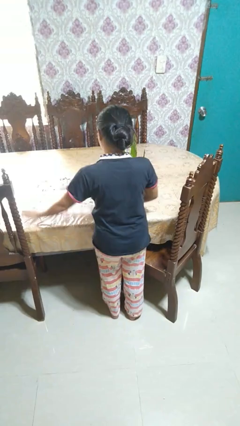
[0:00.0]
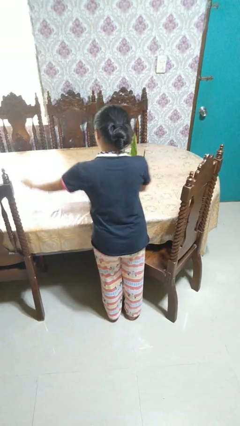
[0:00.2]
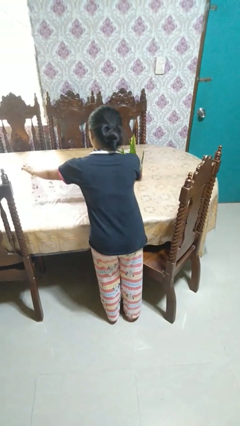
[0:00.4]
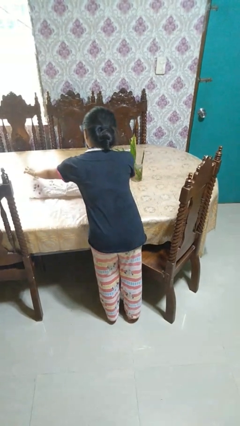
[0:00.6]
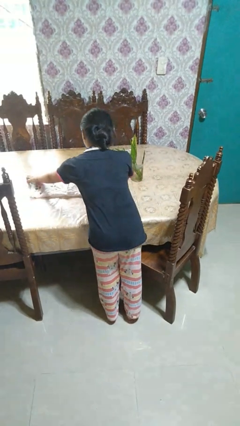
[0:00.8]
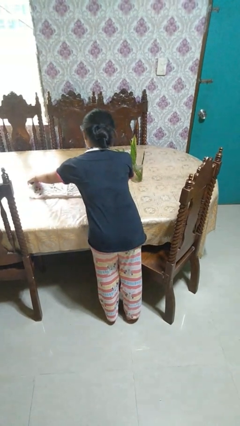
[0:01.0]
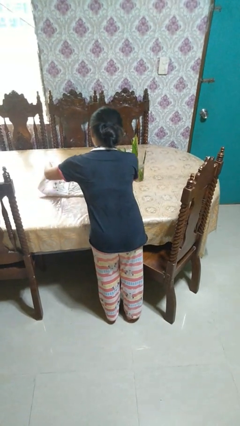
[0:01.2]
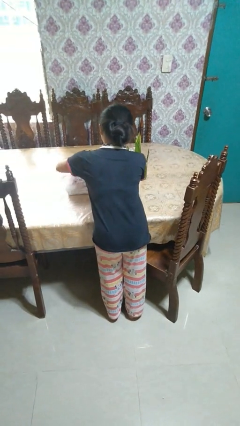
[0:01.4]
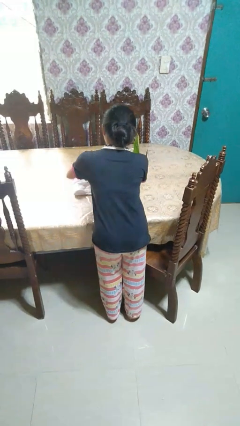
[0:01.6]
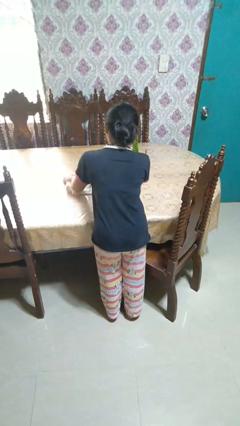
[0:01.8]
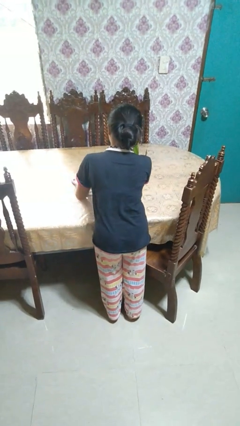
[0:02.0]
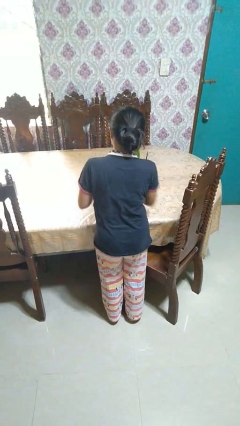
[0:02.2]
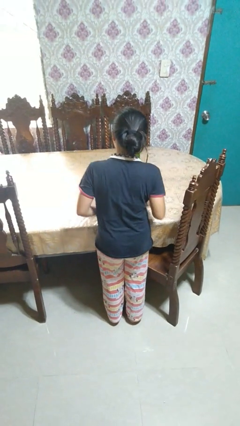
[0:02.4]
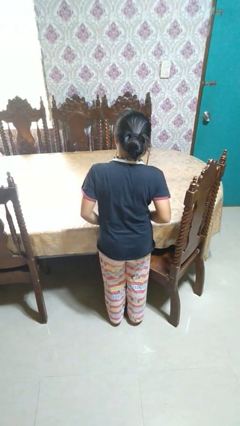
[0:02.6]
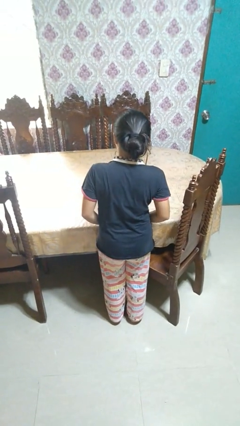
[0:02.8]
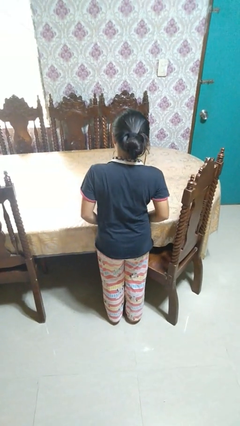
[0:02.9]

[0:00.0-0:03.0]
person folds tablecloth

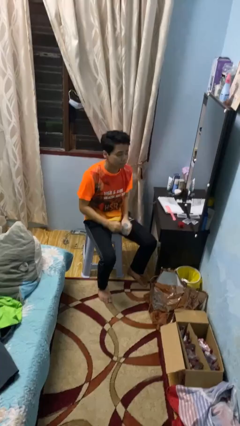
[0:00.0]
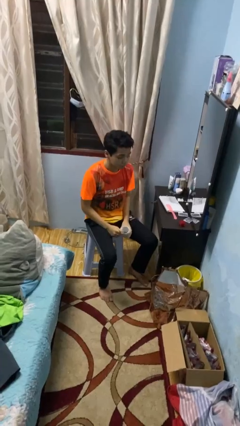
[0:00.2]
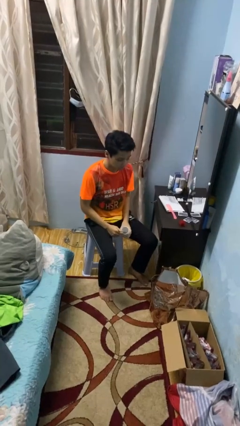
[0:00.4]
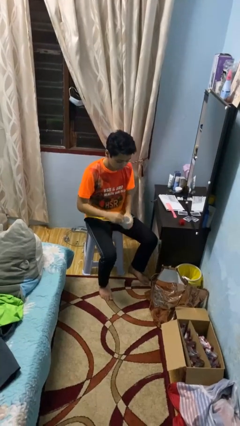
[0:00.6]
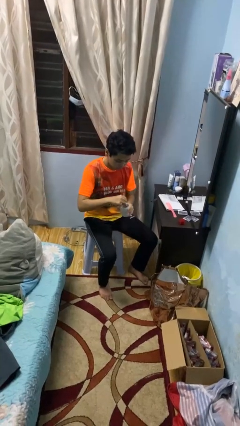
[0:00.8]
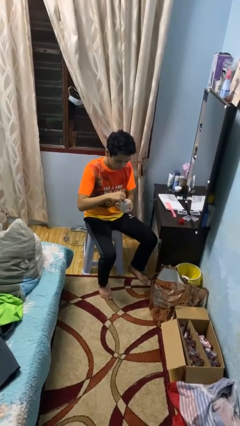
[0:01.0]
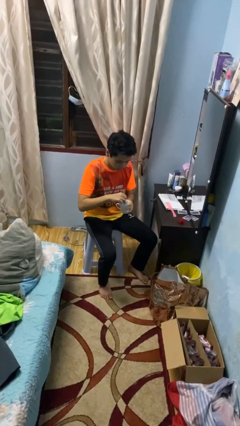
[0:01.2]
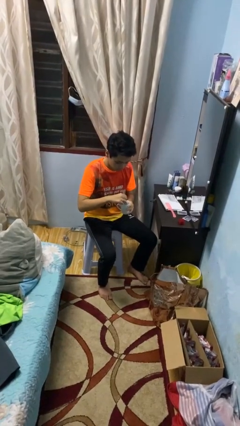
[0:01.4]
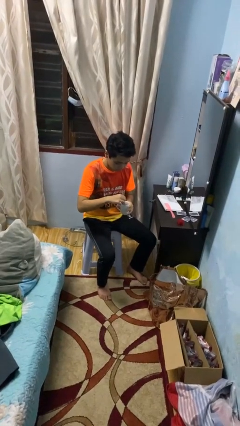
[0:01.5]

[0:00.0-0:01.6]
person stirs mug

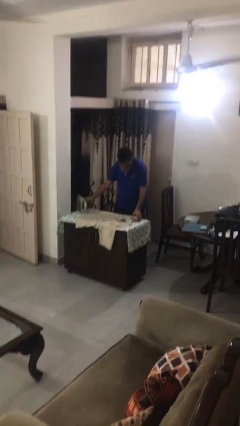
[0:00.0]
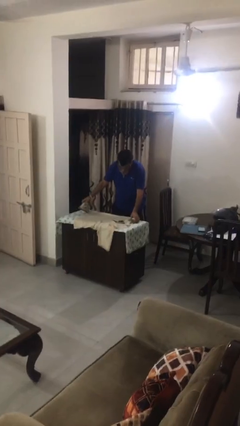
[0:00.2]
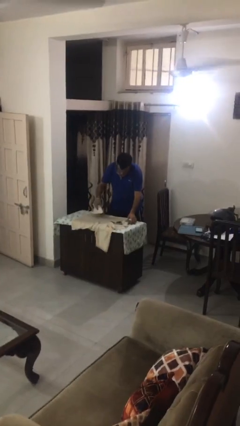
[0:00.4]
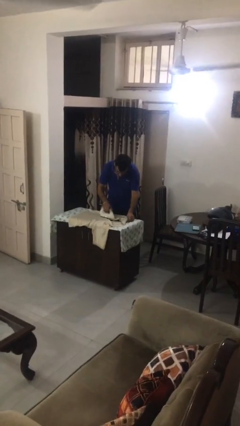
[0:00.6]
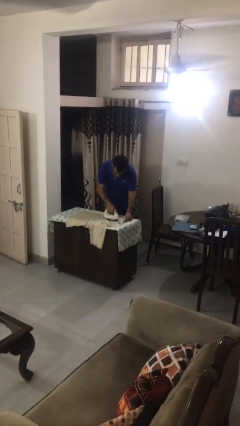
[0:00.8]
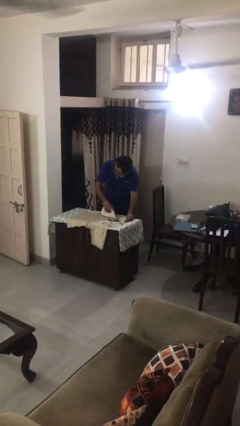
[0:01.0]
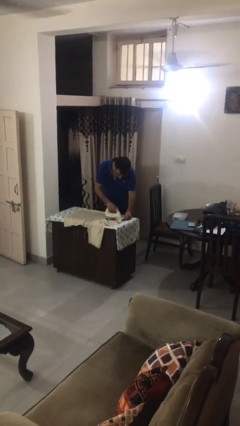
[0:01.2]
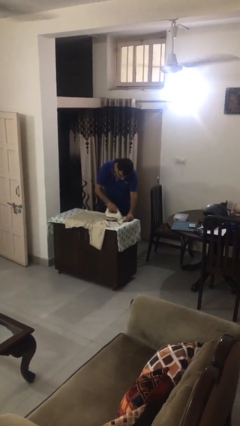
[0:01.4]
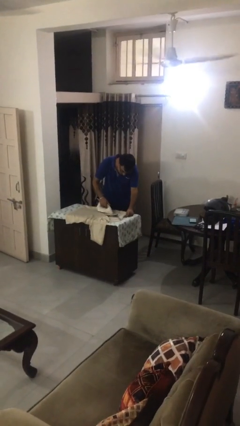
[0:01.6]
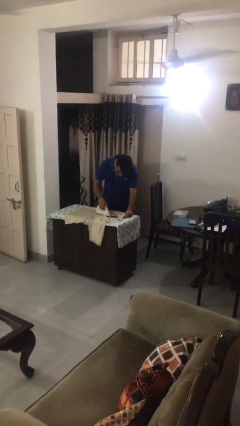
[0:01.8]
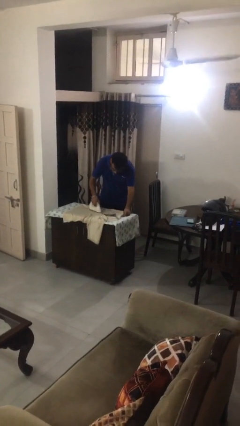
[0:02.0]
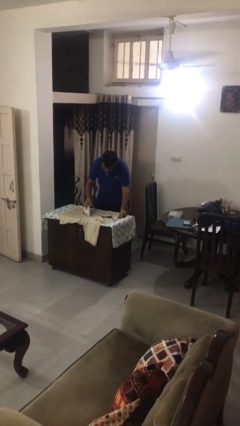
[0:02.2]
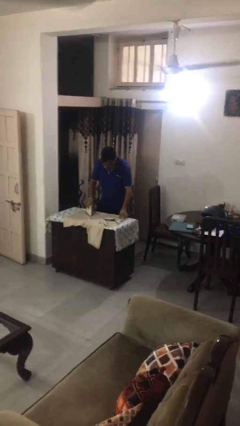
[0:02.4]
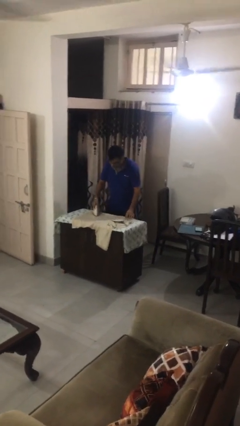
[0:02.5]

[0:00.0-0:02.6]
person irons clothes

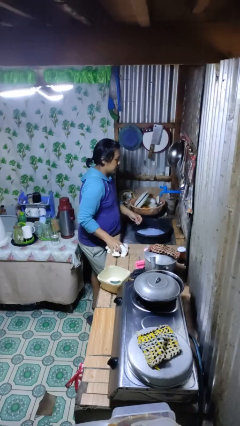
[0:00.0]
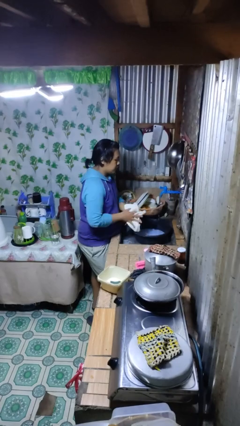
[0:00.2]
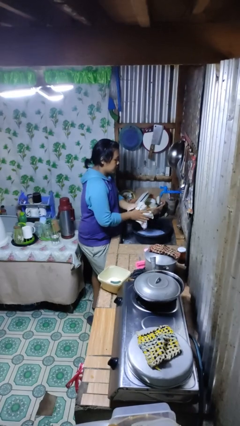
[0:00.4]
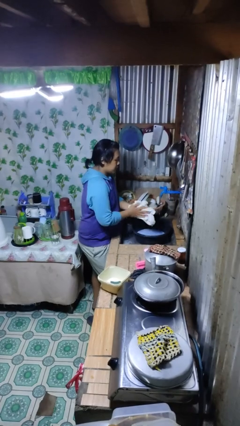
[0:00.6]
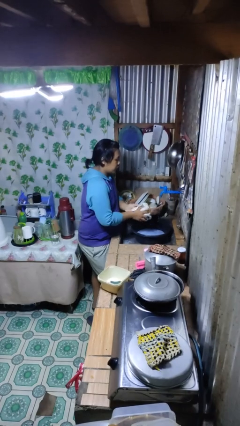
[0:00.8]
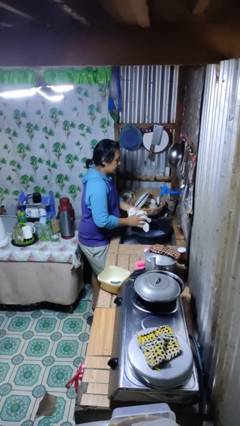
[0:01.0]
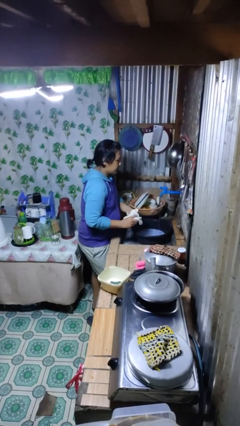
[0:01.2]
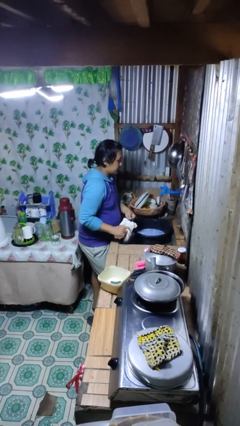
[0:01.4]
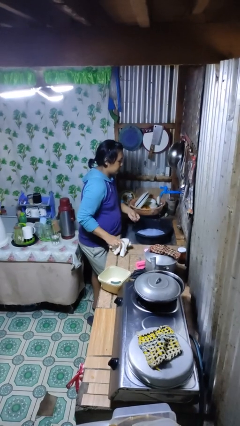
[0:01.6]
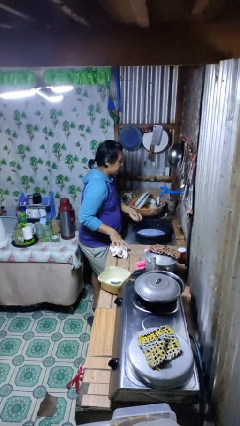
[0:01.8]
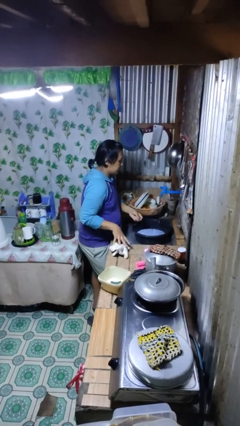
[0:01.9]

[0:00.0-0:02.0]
person dries hands with towel

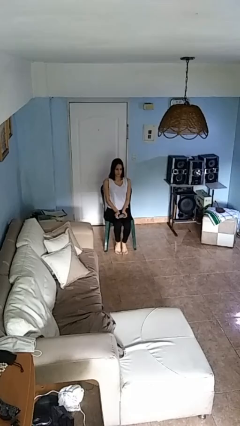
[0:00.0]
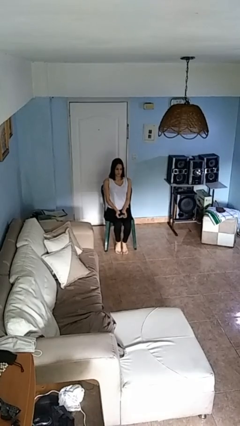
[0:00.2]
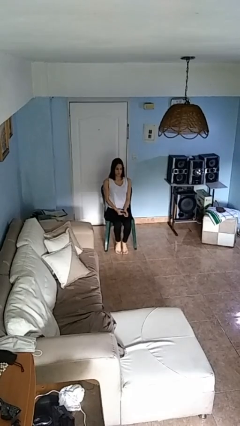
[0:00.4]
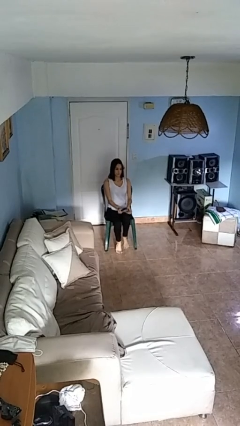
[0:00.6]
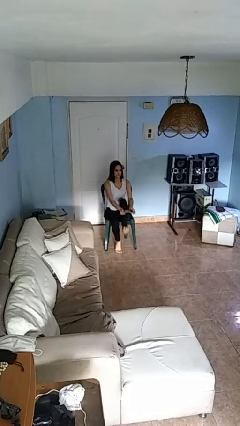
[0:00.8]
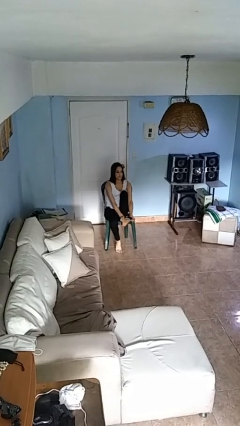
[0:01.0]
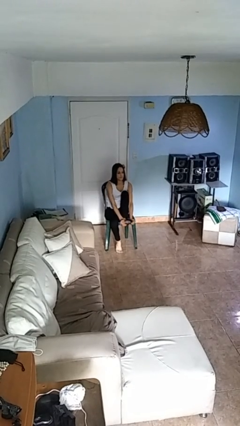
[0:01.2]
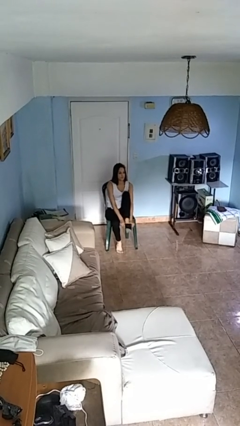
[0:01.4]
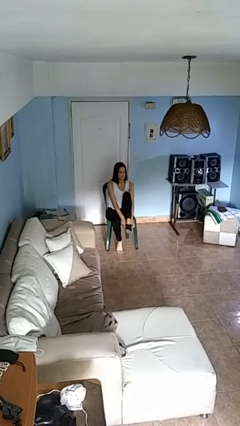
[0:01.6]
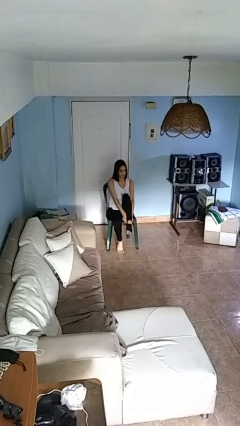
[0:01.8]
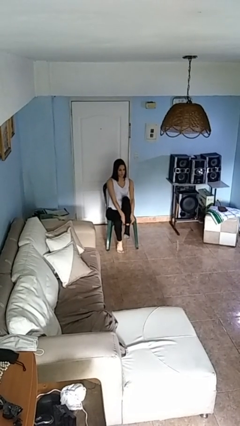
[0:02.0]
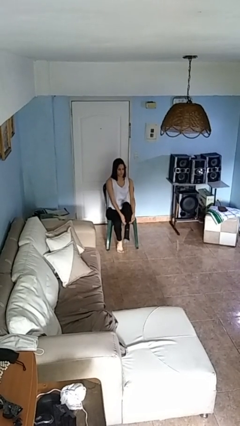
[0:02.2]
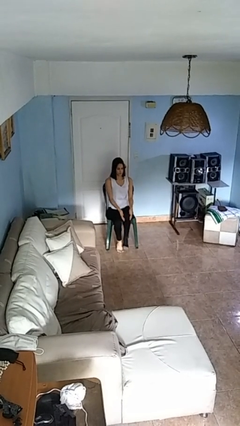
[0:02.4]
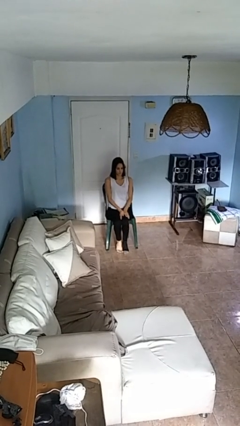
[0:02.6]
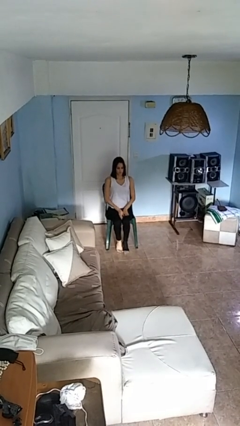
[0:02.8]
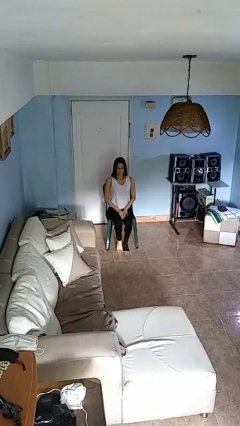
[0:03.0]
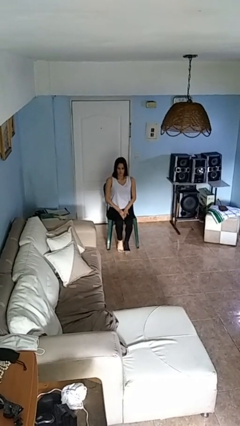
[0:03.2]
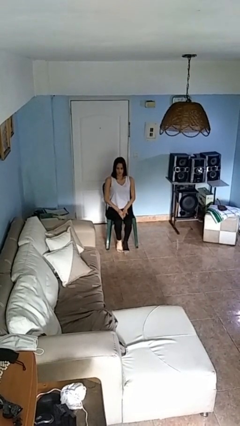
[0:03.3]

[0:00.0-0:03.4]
person puts on socks

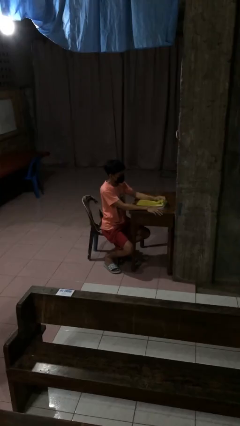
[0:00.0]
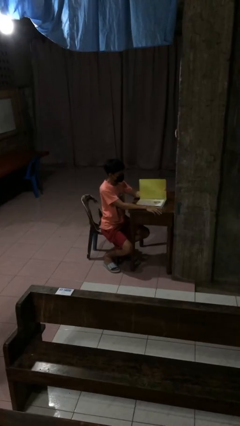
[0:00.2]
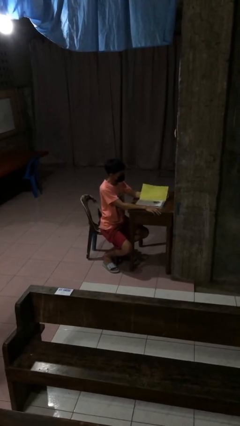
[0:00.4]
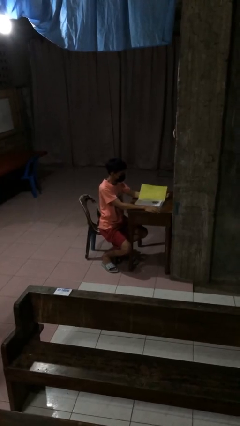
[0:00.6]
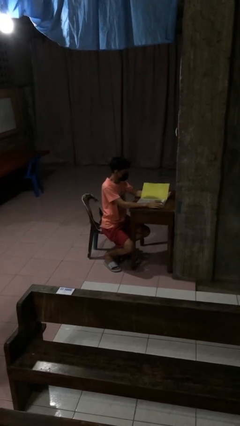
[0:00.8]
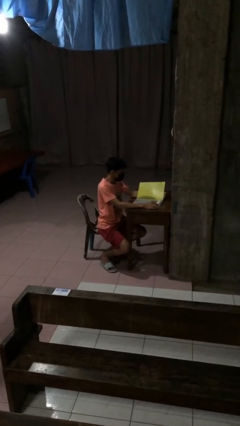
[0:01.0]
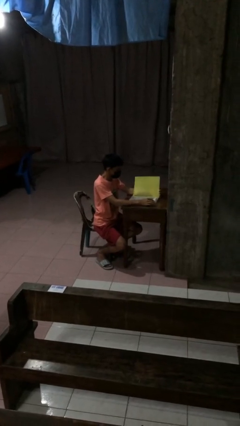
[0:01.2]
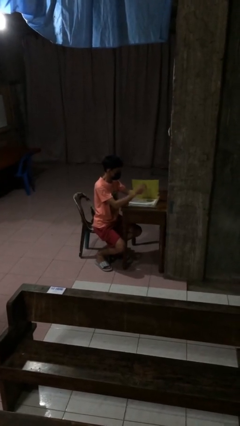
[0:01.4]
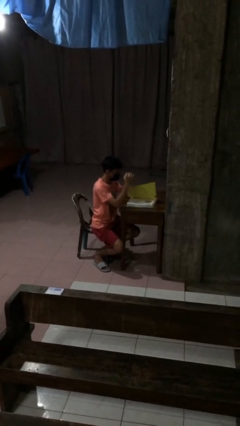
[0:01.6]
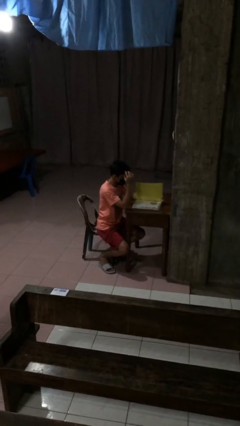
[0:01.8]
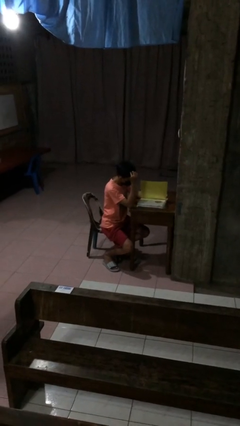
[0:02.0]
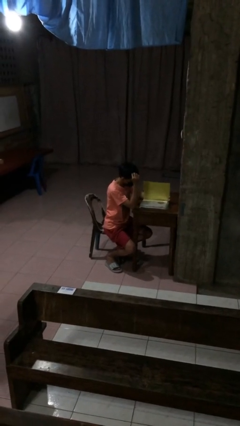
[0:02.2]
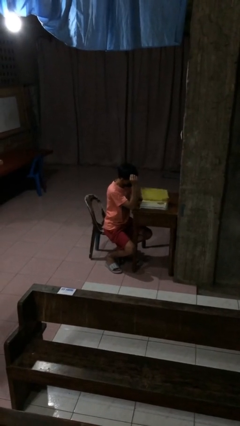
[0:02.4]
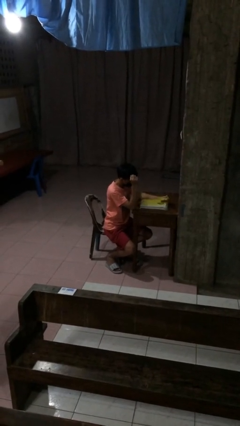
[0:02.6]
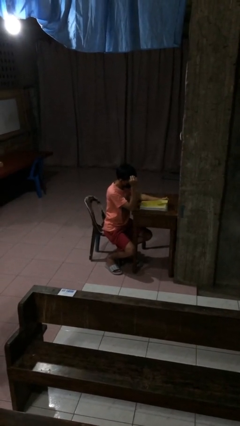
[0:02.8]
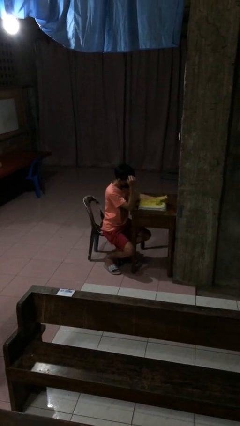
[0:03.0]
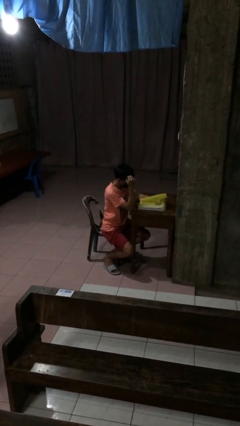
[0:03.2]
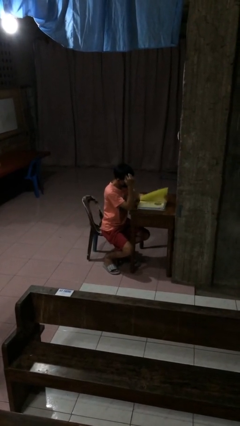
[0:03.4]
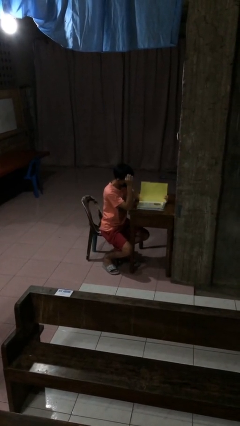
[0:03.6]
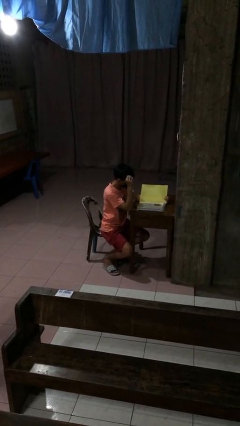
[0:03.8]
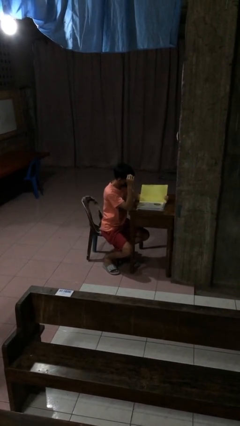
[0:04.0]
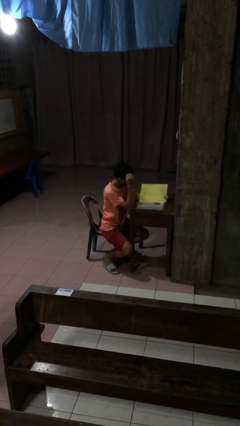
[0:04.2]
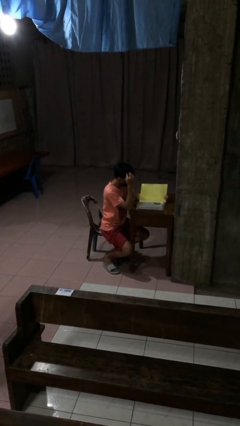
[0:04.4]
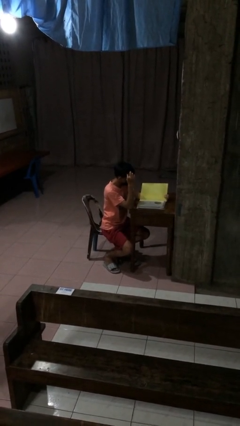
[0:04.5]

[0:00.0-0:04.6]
person reads document
